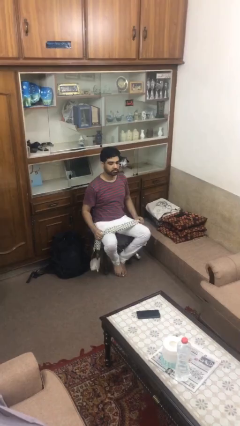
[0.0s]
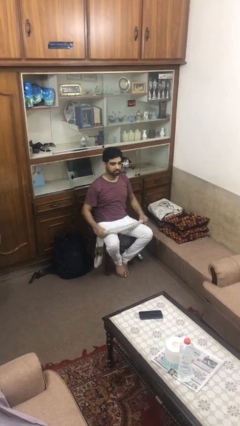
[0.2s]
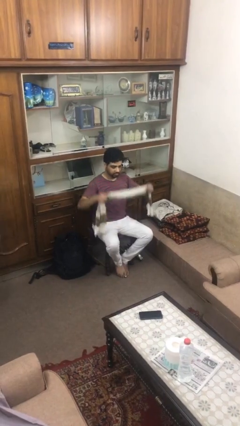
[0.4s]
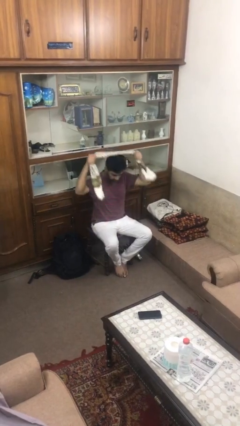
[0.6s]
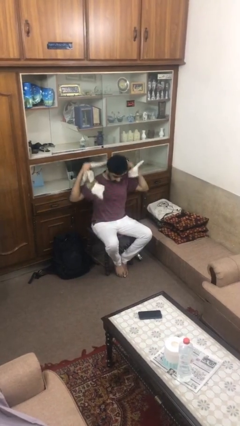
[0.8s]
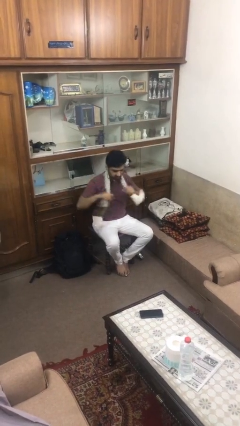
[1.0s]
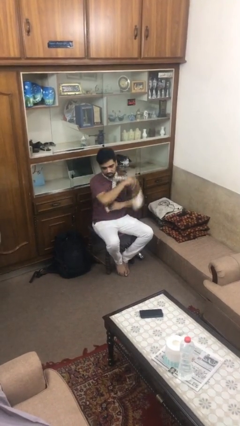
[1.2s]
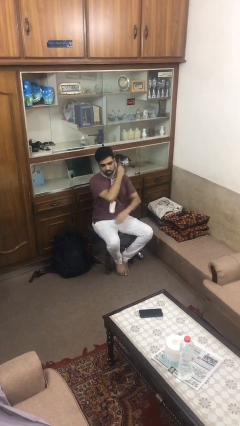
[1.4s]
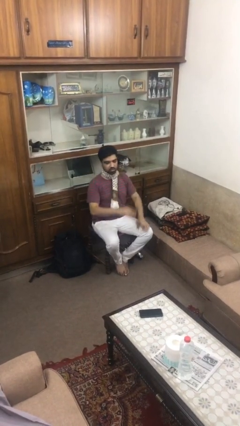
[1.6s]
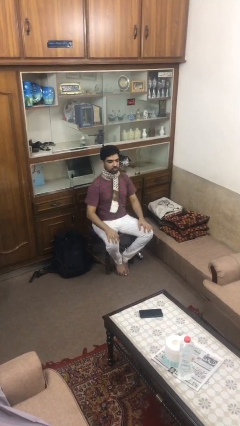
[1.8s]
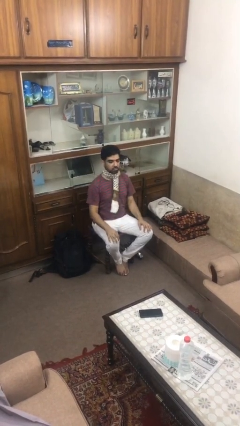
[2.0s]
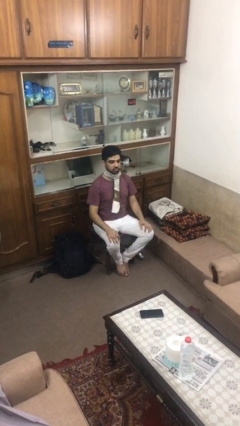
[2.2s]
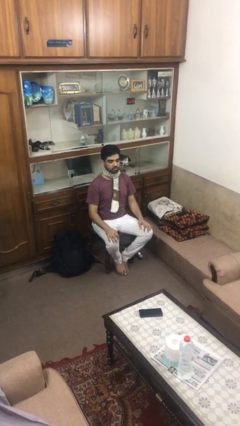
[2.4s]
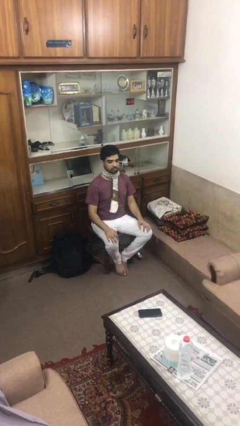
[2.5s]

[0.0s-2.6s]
person puts on scarf

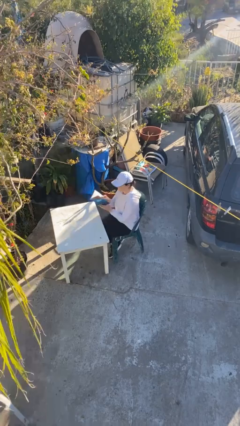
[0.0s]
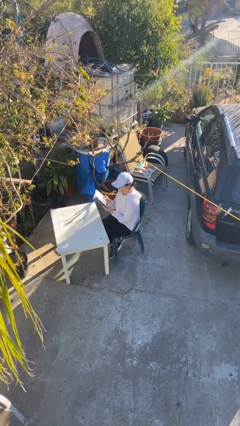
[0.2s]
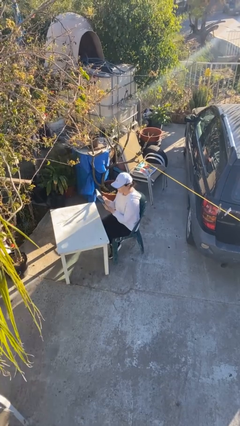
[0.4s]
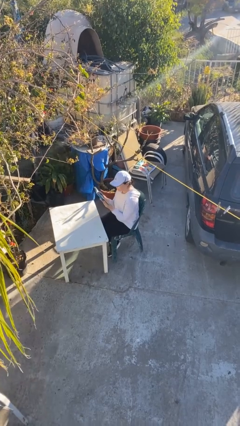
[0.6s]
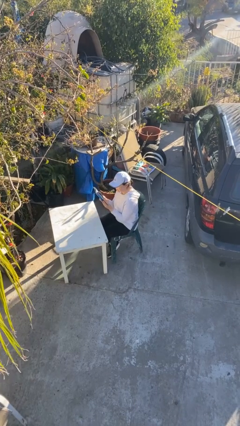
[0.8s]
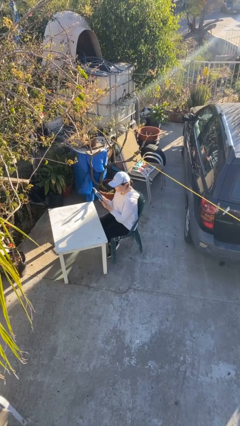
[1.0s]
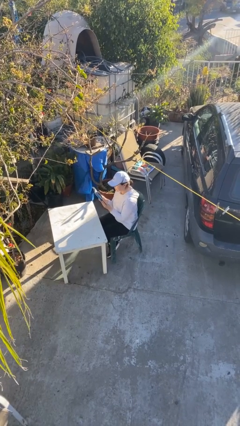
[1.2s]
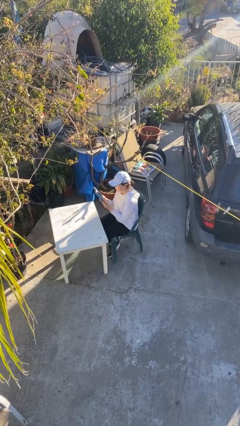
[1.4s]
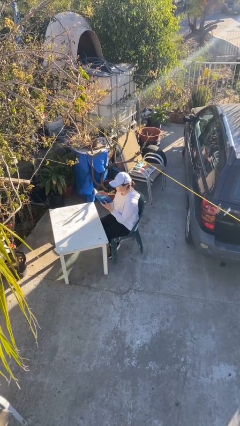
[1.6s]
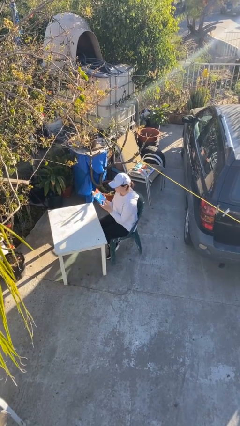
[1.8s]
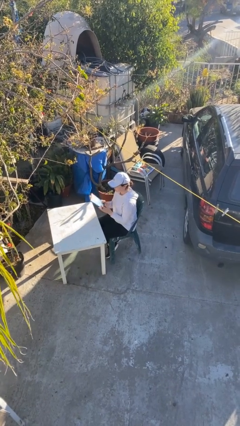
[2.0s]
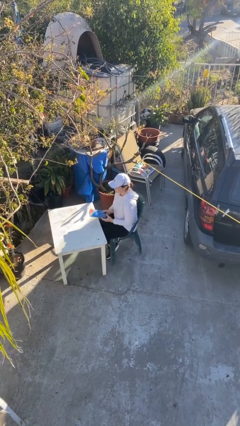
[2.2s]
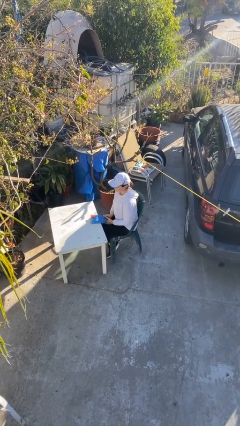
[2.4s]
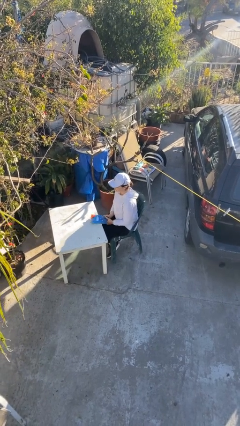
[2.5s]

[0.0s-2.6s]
person reads document

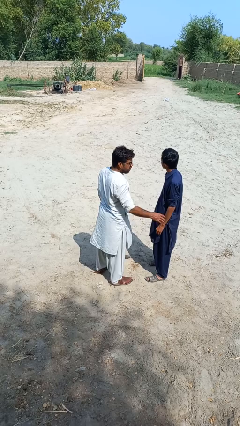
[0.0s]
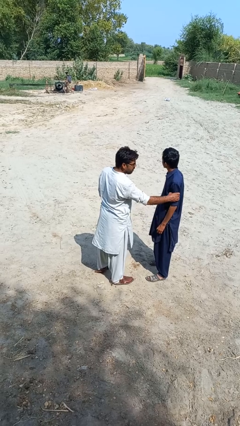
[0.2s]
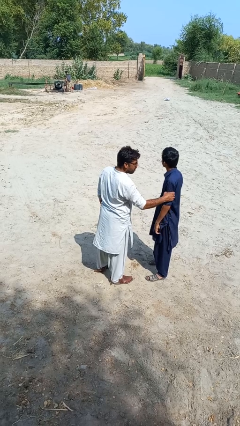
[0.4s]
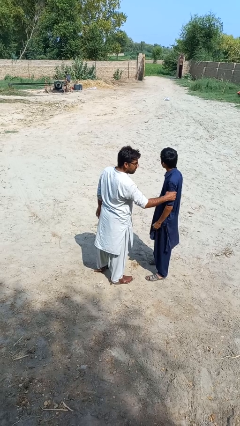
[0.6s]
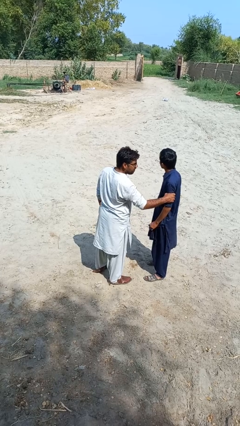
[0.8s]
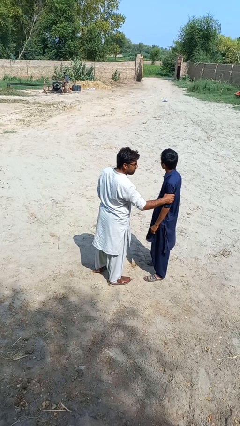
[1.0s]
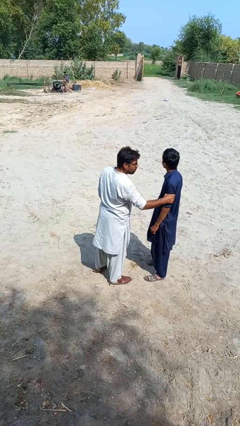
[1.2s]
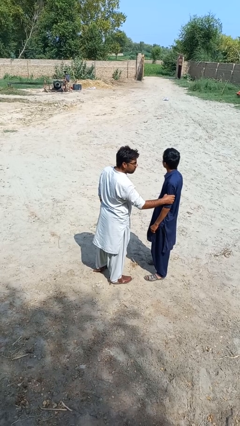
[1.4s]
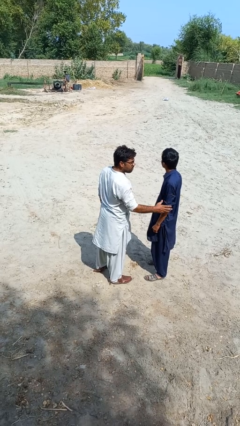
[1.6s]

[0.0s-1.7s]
person grabs person by bicep

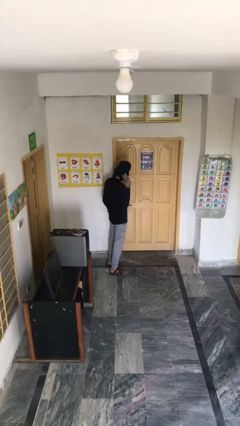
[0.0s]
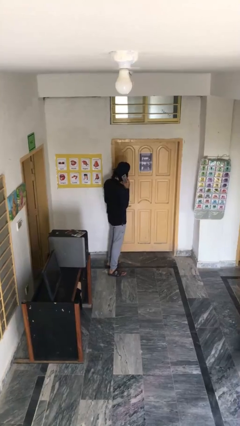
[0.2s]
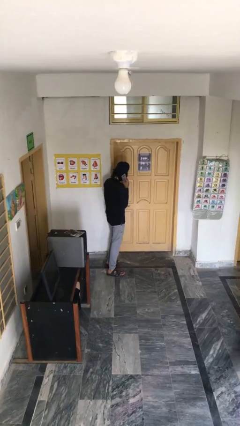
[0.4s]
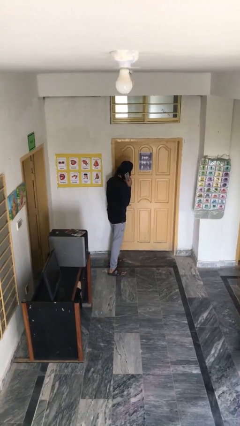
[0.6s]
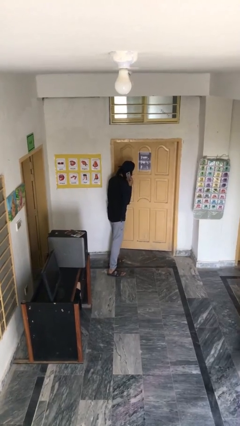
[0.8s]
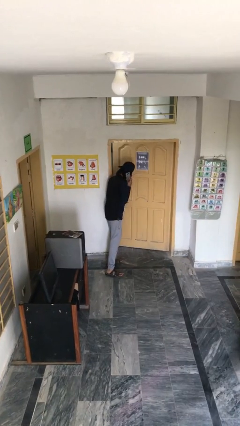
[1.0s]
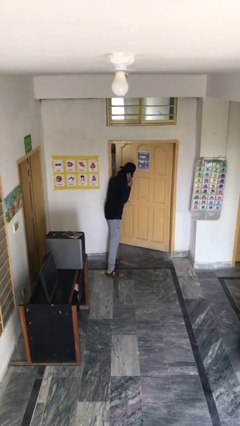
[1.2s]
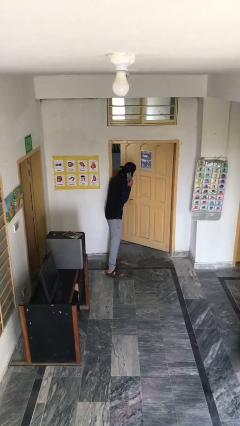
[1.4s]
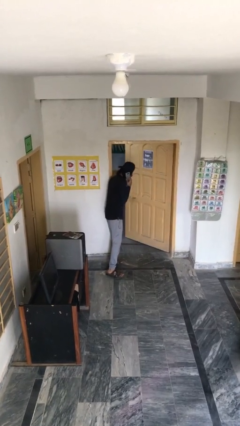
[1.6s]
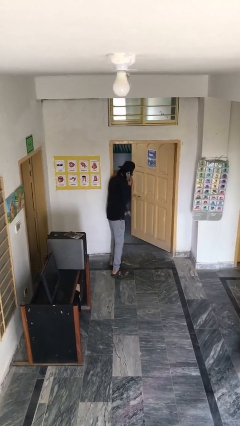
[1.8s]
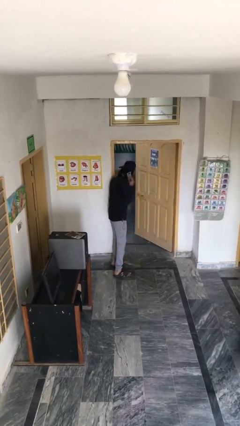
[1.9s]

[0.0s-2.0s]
person opens facility door

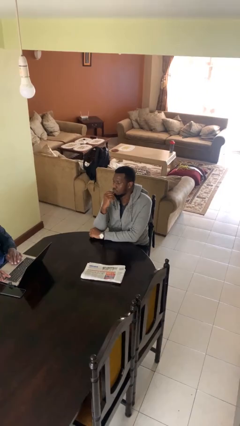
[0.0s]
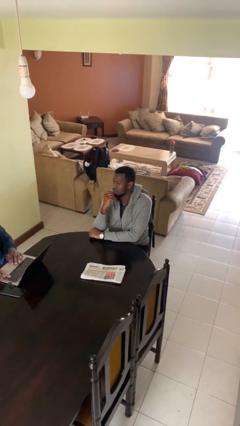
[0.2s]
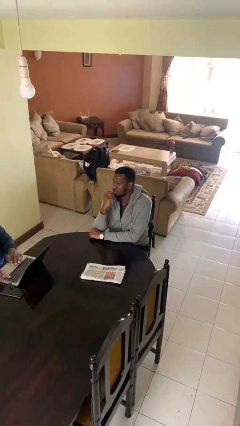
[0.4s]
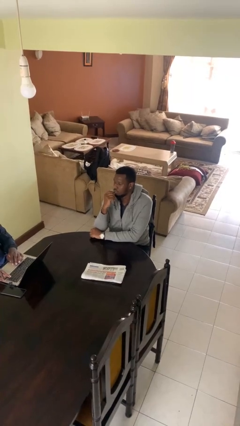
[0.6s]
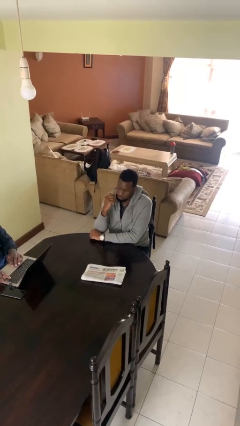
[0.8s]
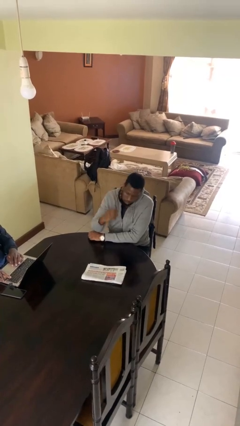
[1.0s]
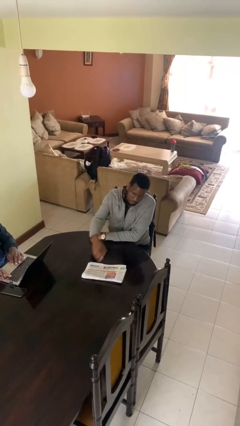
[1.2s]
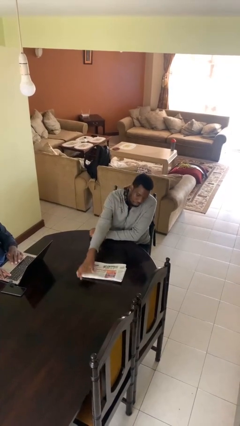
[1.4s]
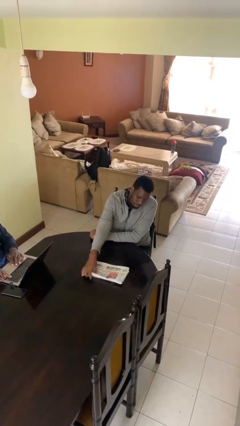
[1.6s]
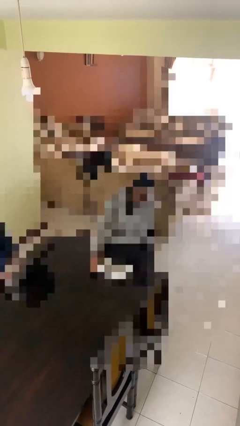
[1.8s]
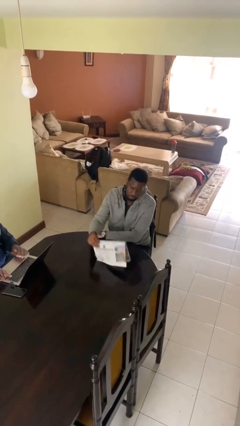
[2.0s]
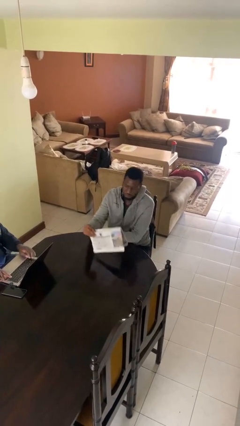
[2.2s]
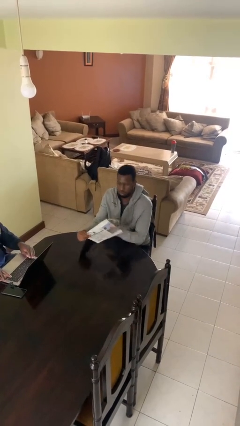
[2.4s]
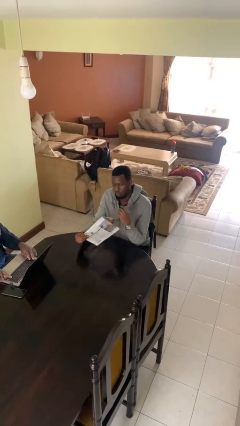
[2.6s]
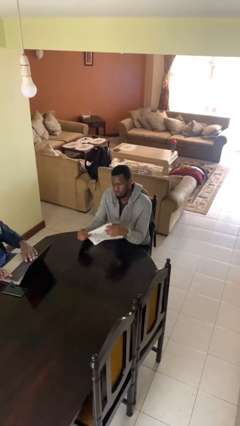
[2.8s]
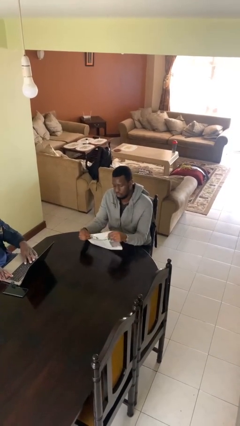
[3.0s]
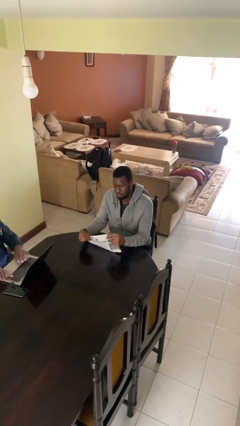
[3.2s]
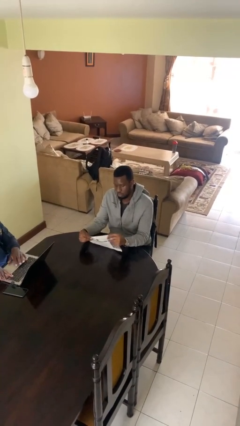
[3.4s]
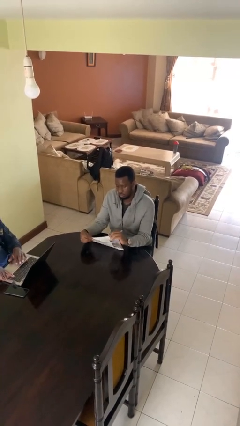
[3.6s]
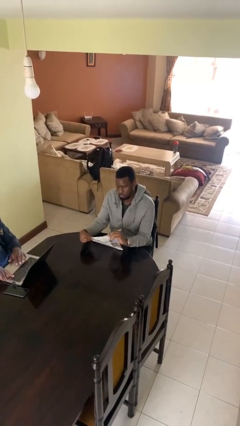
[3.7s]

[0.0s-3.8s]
person picks up object from table

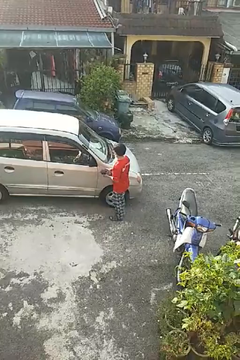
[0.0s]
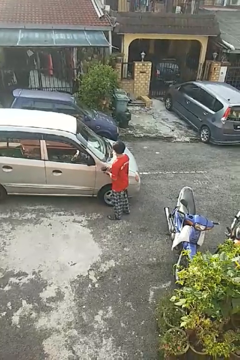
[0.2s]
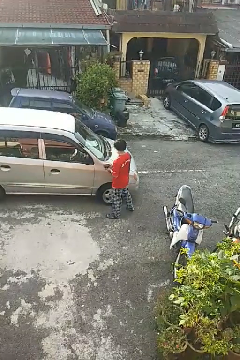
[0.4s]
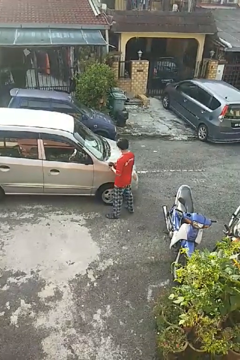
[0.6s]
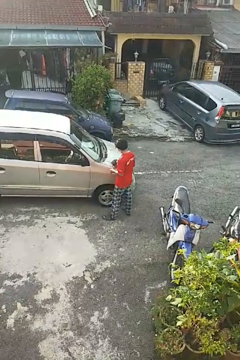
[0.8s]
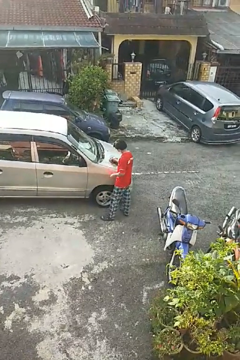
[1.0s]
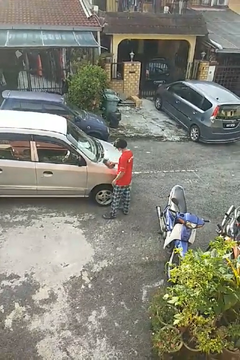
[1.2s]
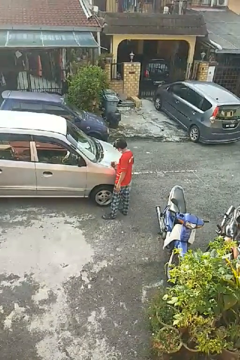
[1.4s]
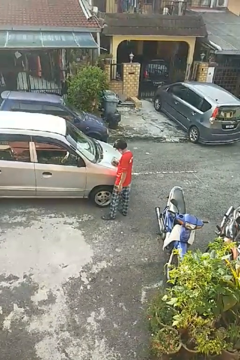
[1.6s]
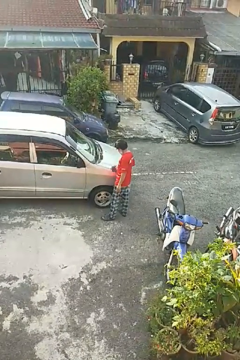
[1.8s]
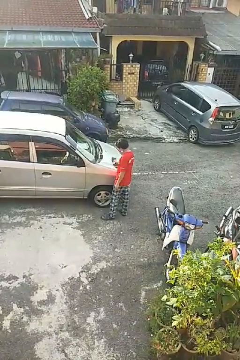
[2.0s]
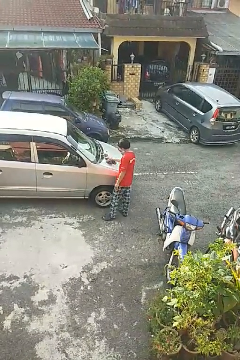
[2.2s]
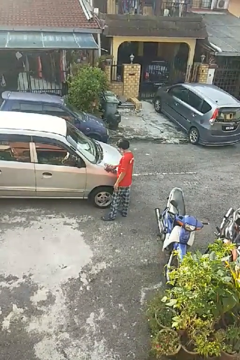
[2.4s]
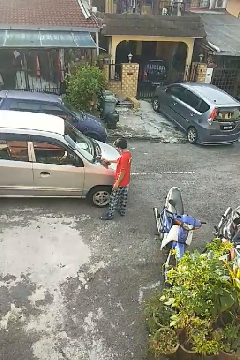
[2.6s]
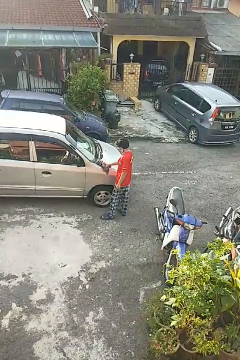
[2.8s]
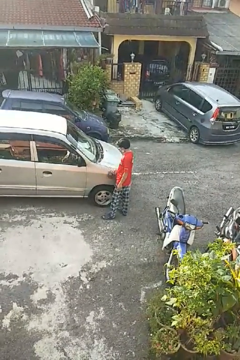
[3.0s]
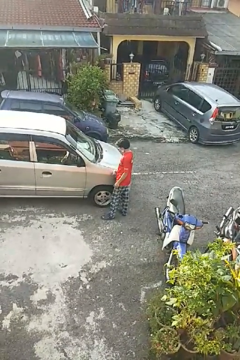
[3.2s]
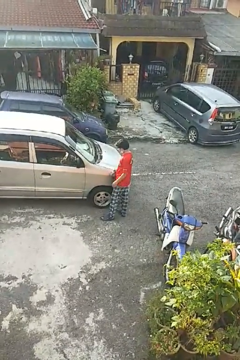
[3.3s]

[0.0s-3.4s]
person polishes car with rag

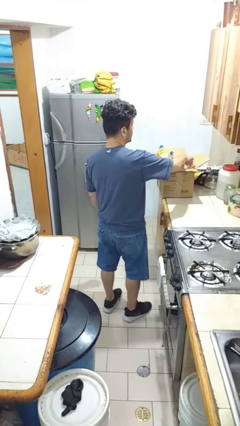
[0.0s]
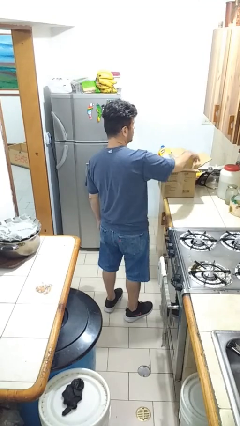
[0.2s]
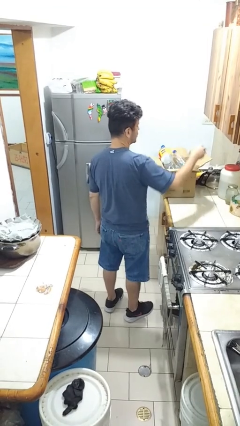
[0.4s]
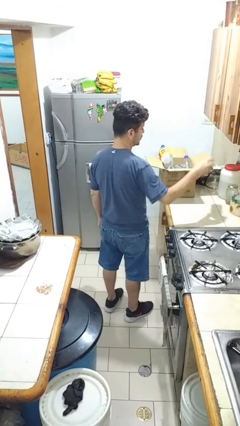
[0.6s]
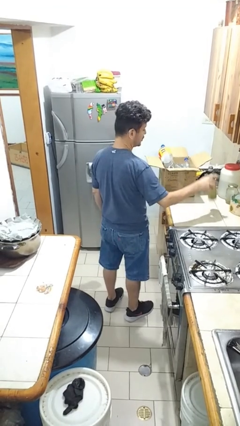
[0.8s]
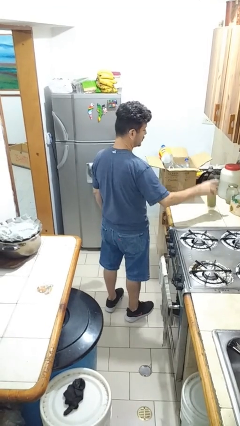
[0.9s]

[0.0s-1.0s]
person takes object from box

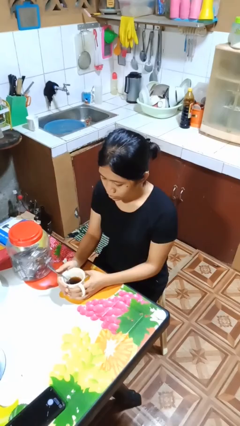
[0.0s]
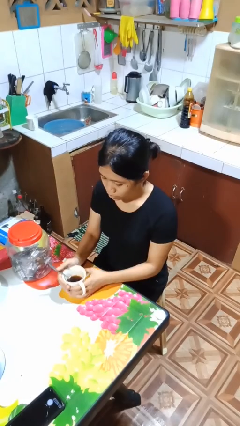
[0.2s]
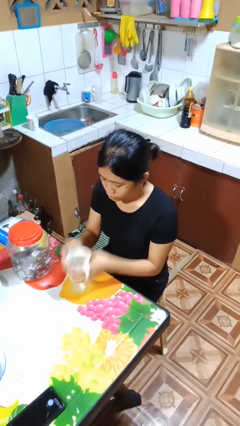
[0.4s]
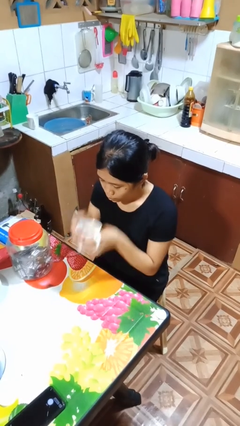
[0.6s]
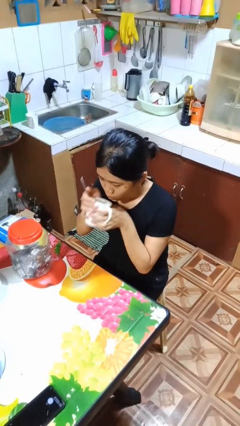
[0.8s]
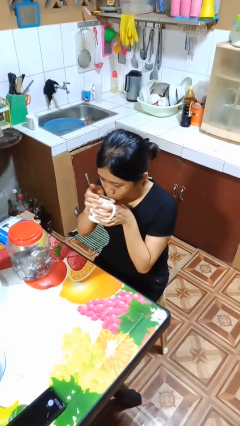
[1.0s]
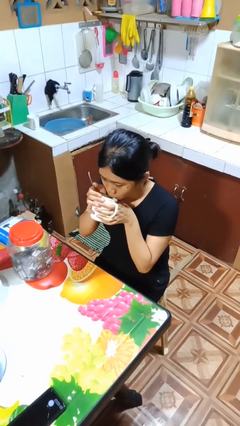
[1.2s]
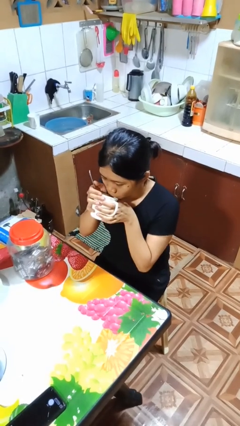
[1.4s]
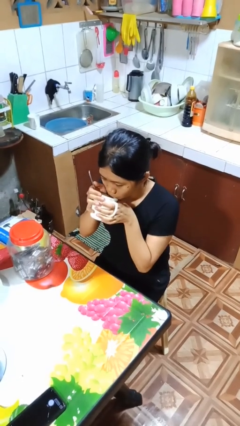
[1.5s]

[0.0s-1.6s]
person drinks from mug
